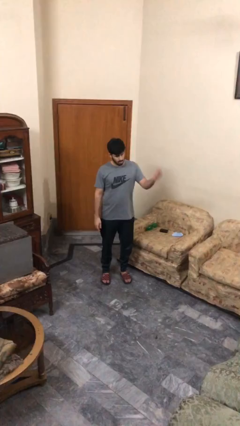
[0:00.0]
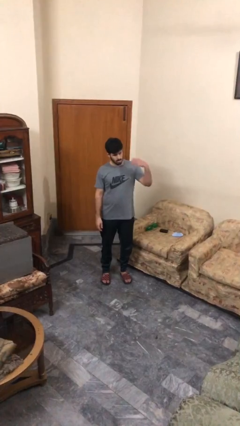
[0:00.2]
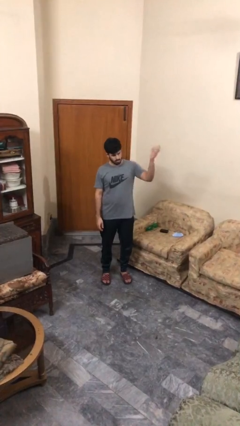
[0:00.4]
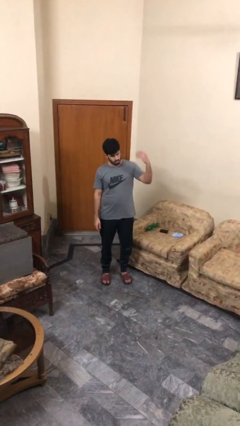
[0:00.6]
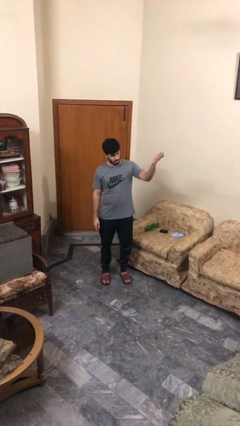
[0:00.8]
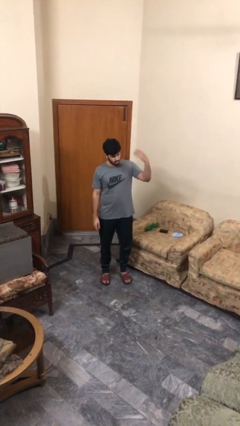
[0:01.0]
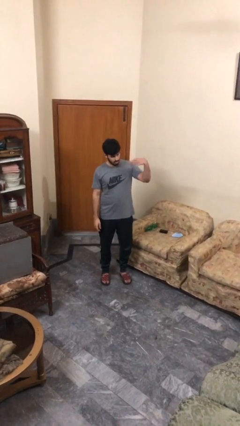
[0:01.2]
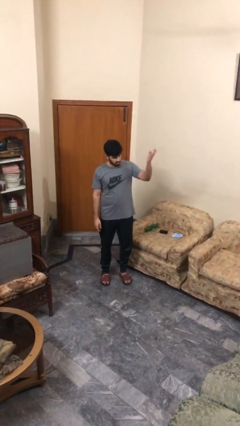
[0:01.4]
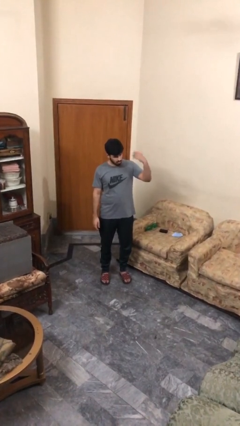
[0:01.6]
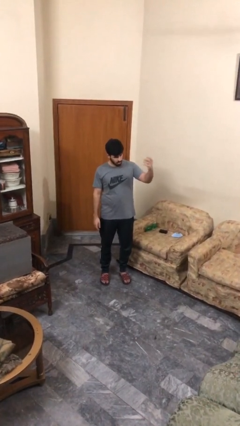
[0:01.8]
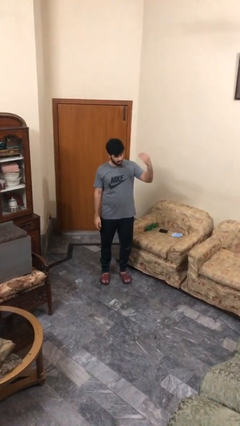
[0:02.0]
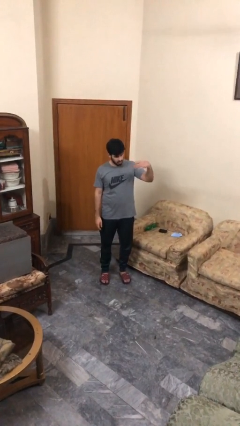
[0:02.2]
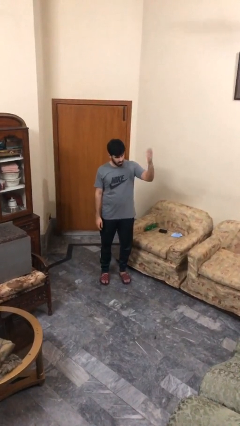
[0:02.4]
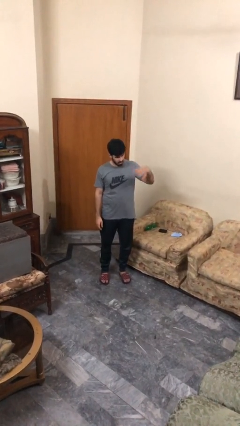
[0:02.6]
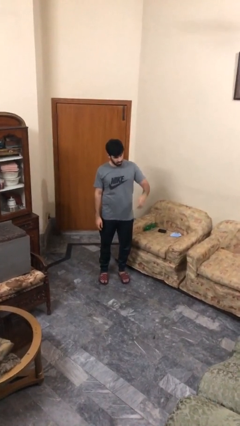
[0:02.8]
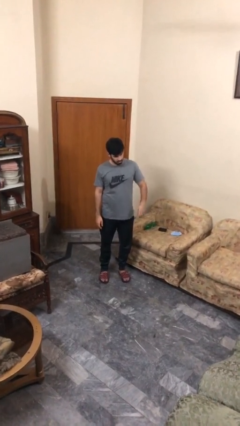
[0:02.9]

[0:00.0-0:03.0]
person gestures come here
